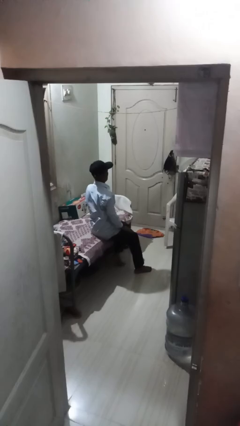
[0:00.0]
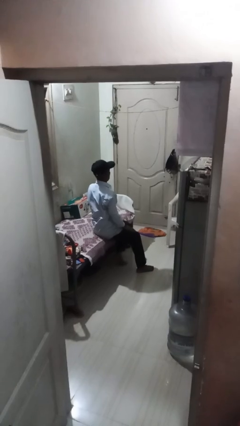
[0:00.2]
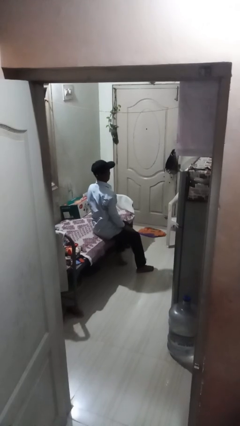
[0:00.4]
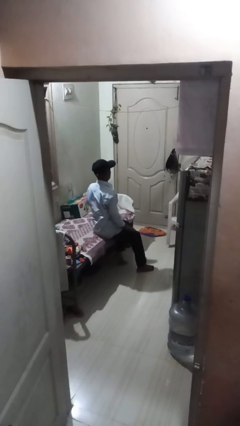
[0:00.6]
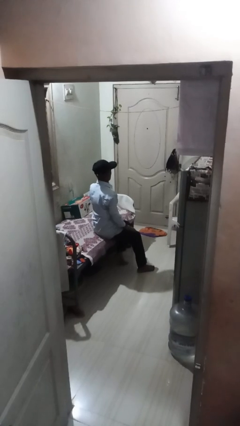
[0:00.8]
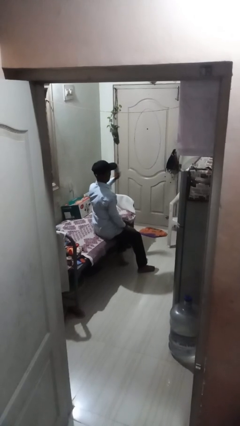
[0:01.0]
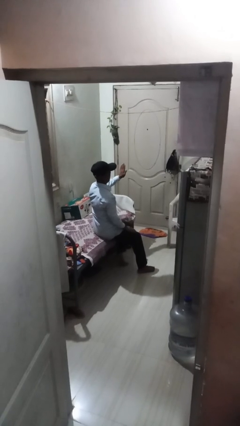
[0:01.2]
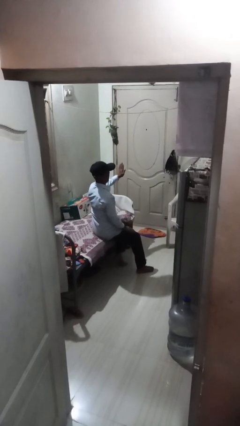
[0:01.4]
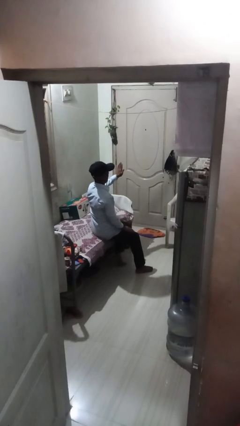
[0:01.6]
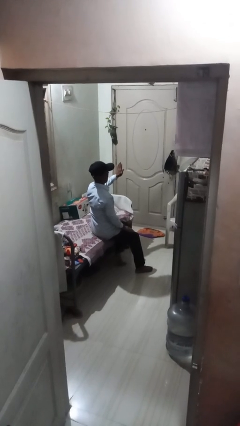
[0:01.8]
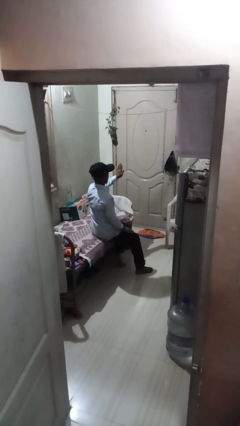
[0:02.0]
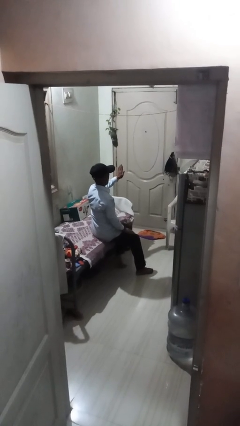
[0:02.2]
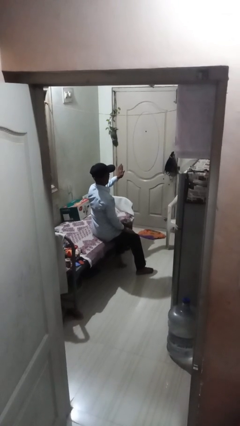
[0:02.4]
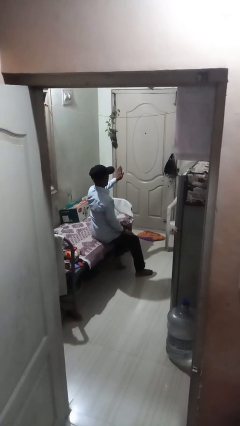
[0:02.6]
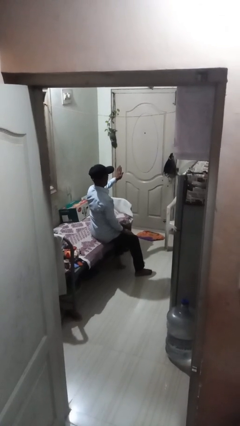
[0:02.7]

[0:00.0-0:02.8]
person gestures stop

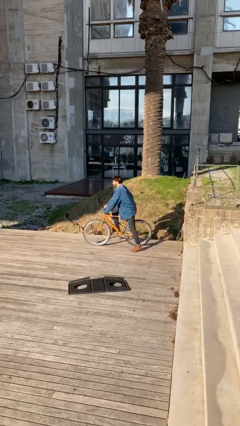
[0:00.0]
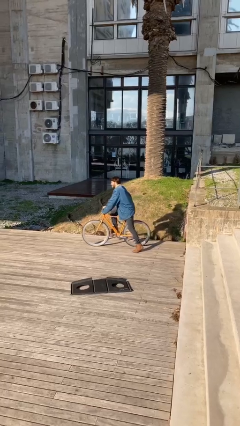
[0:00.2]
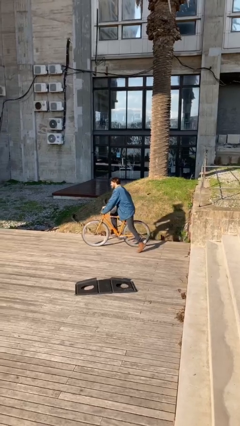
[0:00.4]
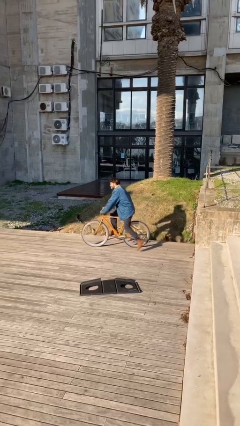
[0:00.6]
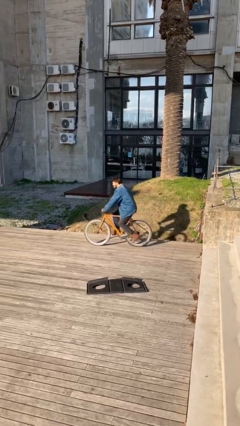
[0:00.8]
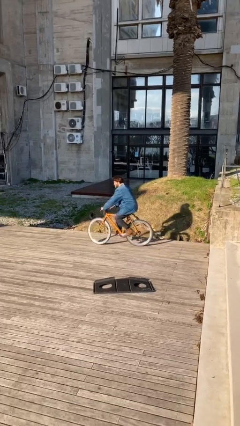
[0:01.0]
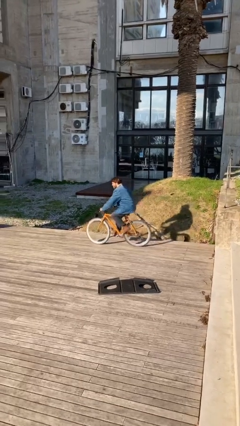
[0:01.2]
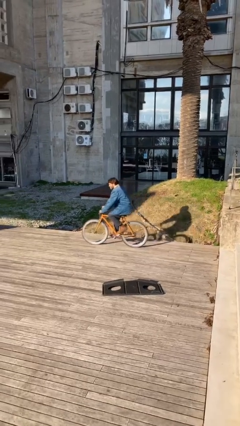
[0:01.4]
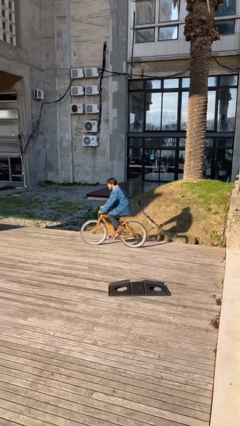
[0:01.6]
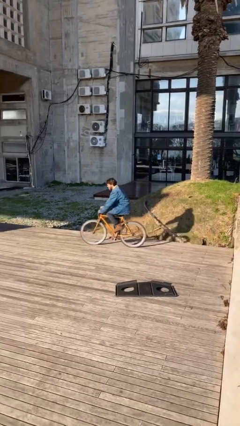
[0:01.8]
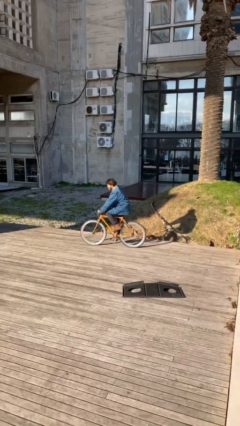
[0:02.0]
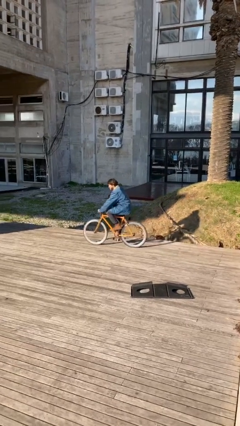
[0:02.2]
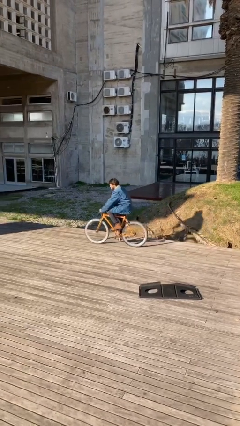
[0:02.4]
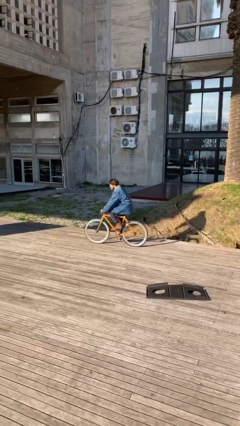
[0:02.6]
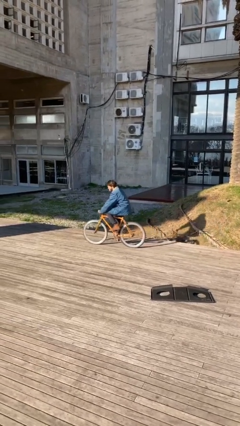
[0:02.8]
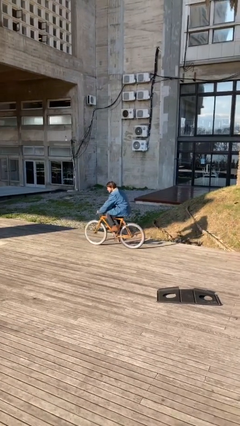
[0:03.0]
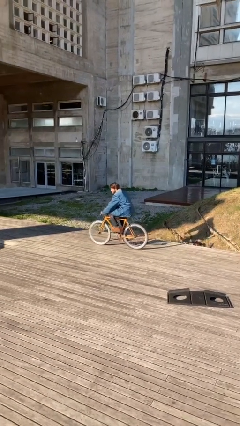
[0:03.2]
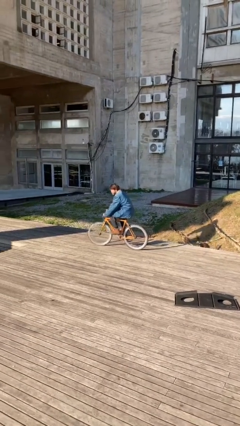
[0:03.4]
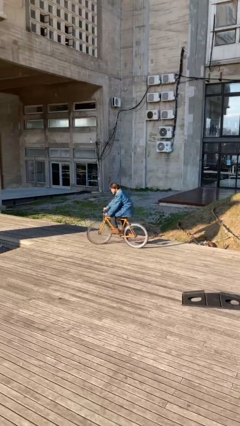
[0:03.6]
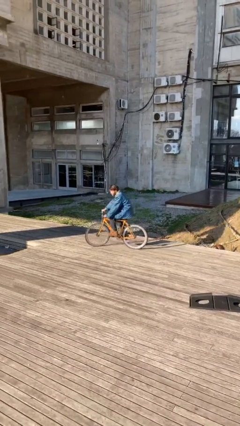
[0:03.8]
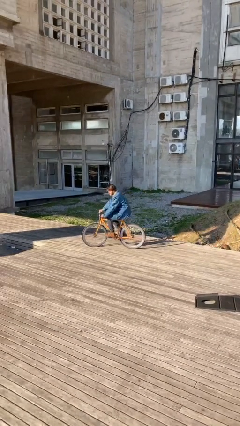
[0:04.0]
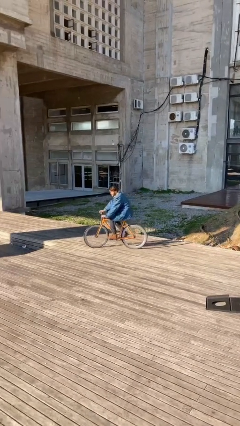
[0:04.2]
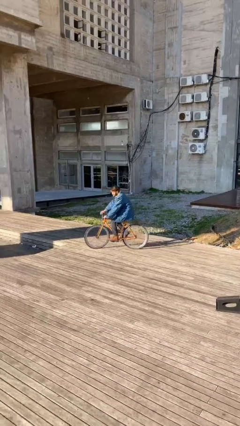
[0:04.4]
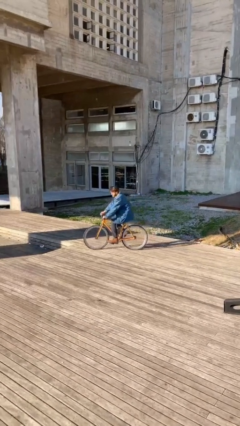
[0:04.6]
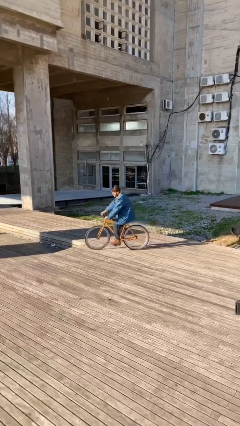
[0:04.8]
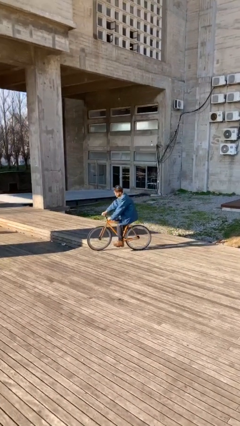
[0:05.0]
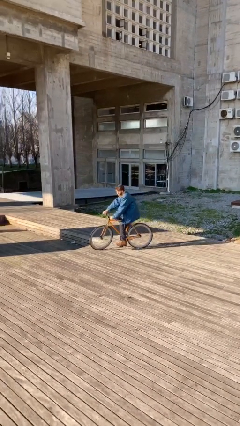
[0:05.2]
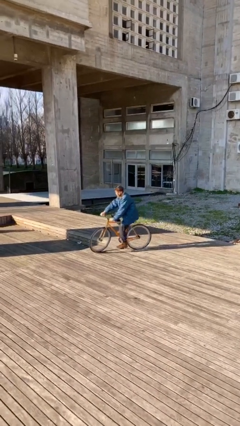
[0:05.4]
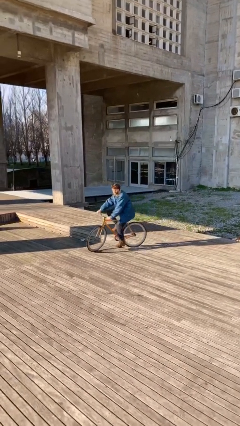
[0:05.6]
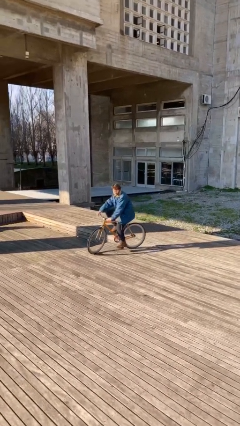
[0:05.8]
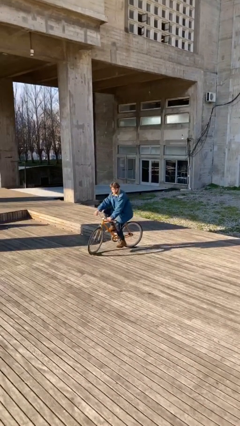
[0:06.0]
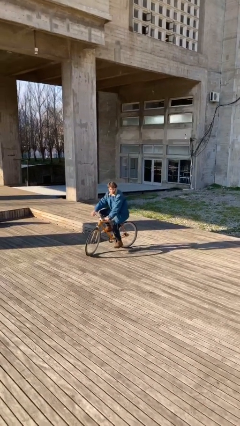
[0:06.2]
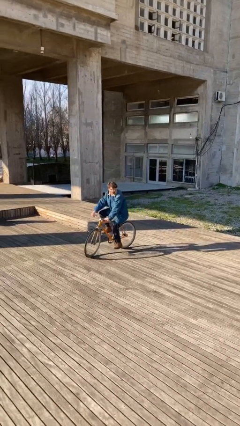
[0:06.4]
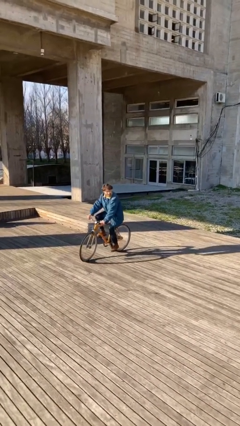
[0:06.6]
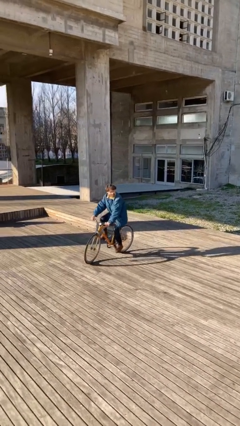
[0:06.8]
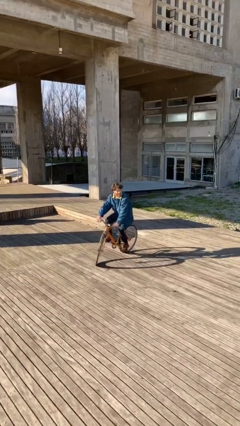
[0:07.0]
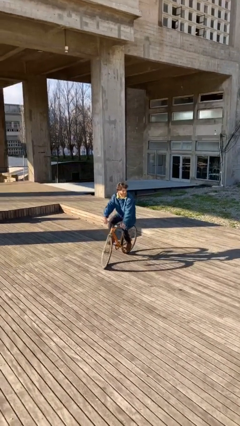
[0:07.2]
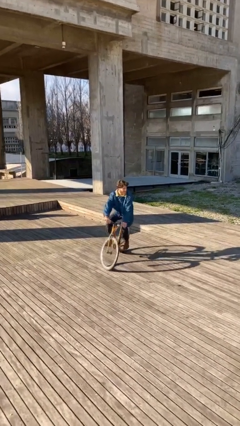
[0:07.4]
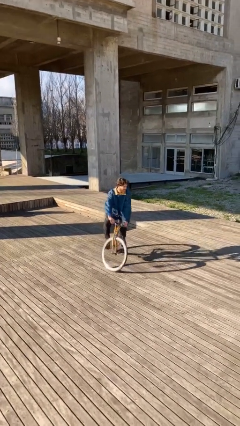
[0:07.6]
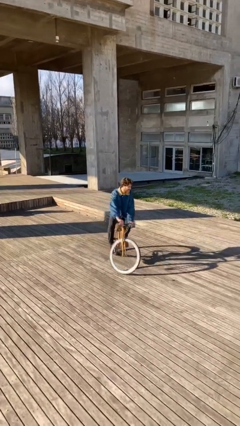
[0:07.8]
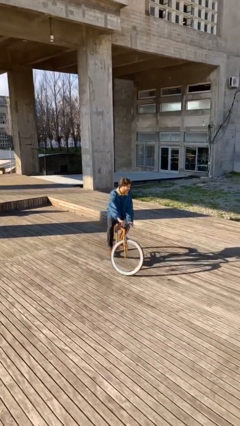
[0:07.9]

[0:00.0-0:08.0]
person rides bicycle

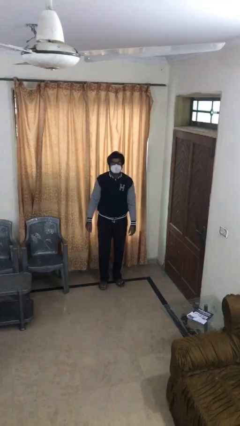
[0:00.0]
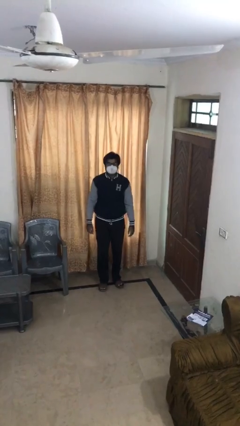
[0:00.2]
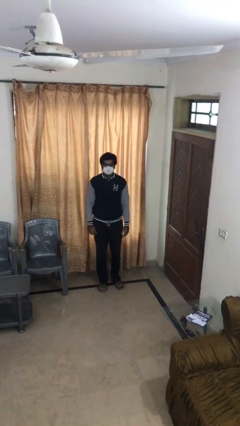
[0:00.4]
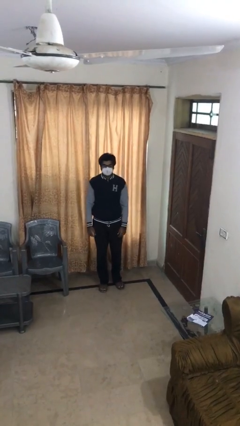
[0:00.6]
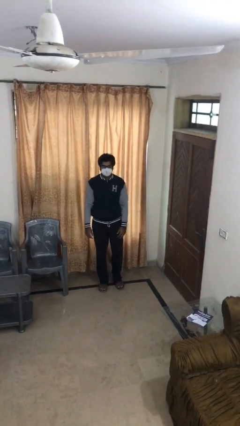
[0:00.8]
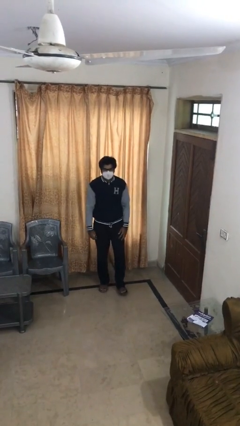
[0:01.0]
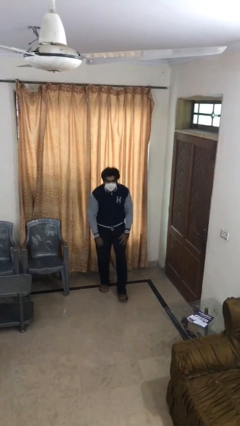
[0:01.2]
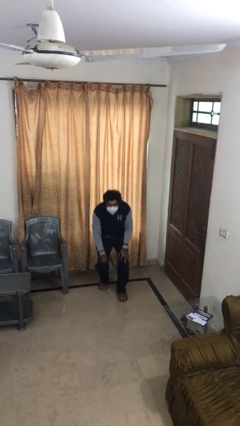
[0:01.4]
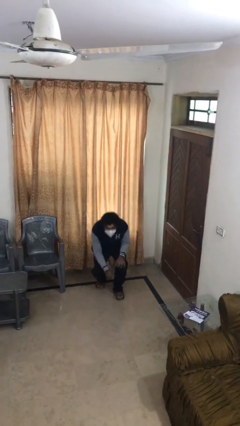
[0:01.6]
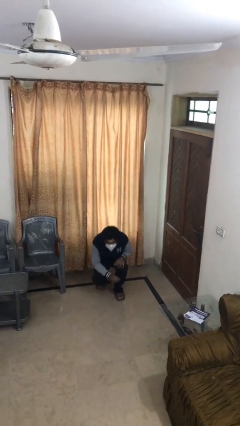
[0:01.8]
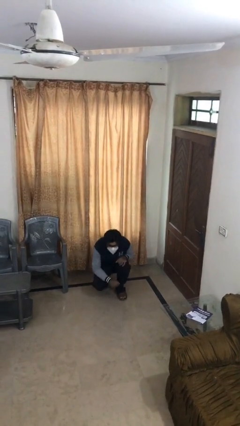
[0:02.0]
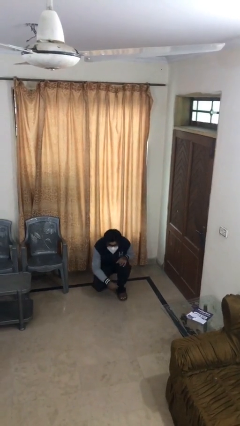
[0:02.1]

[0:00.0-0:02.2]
person sits down

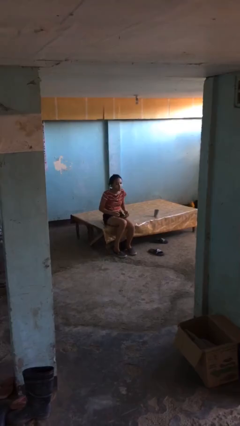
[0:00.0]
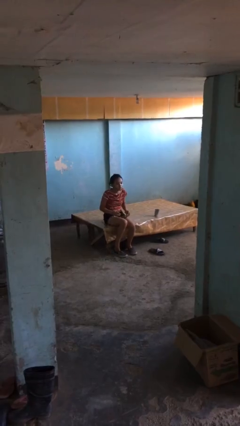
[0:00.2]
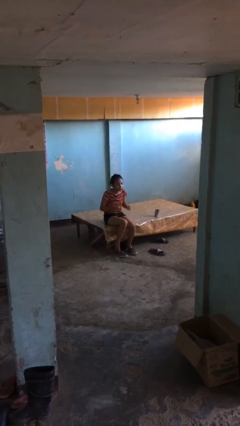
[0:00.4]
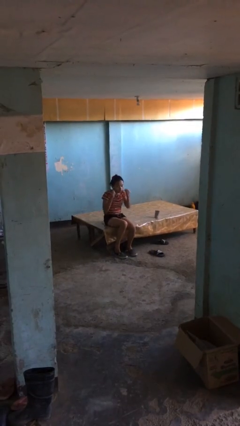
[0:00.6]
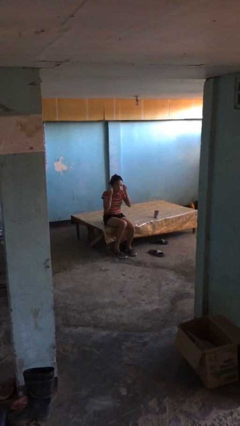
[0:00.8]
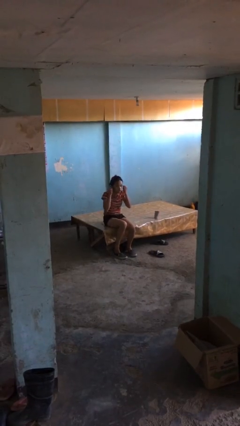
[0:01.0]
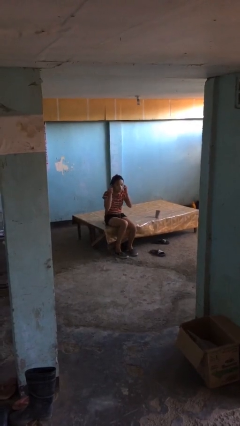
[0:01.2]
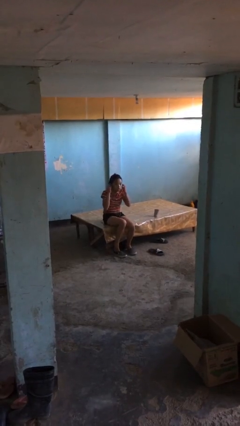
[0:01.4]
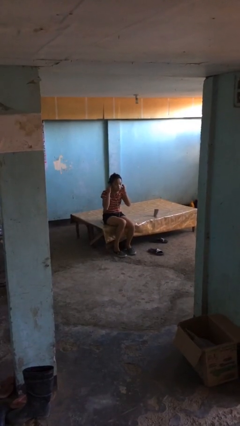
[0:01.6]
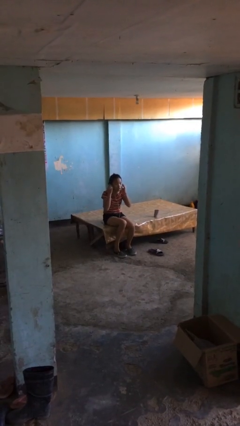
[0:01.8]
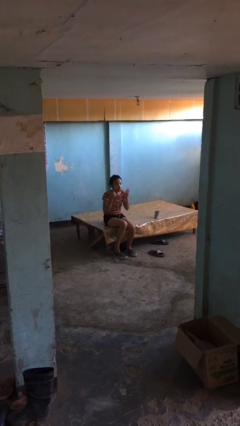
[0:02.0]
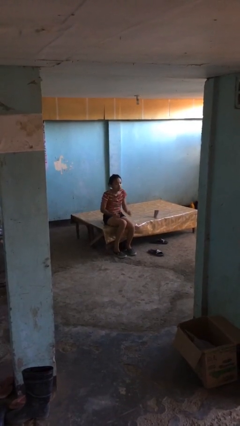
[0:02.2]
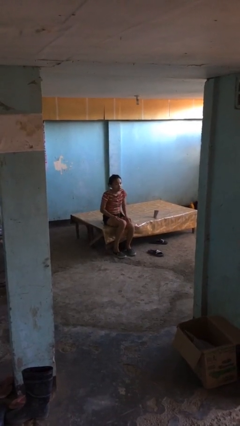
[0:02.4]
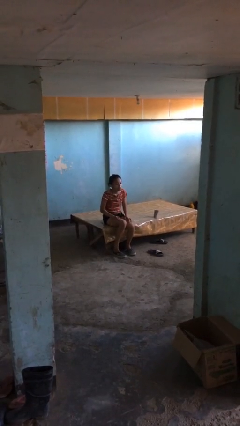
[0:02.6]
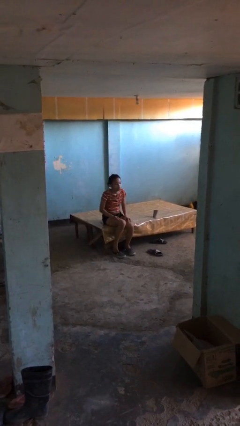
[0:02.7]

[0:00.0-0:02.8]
person puts on headphones

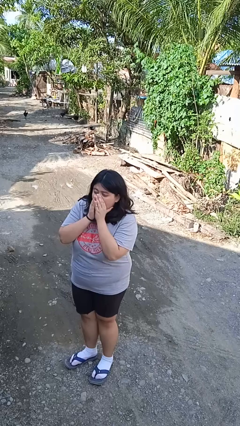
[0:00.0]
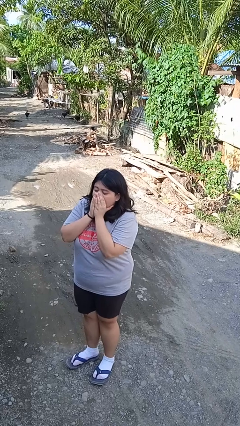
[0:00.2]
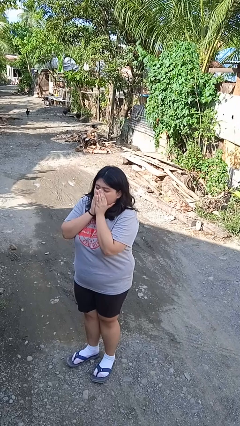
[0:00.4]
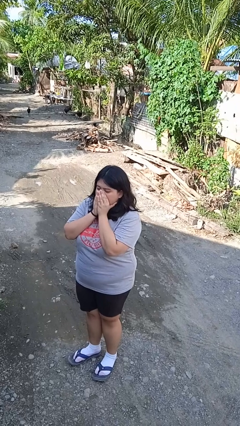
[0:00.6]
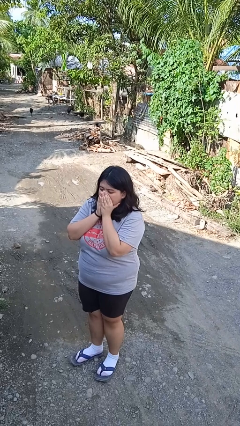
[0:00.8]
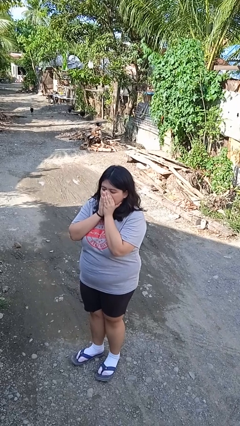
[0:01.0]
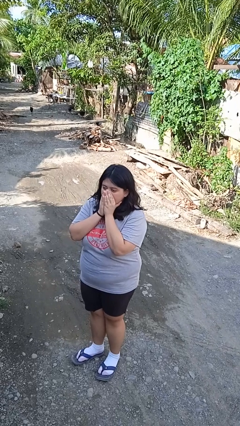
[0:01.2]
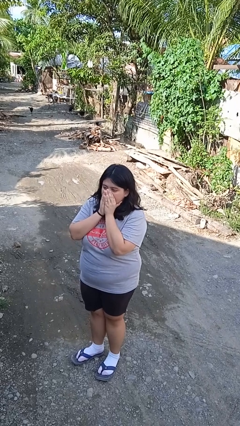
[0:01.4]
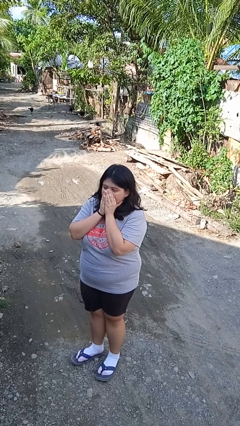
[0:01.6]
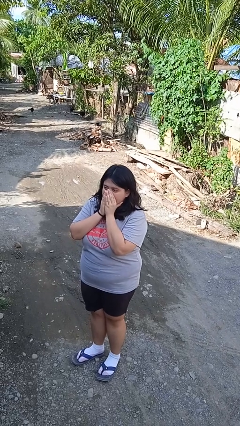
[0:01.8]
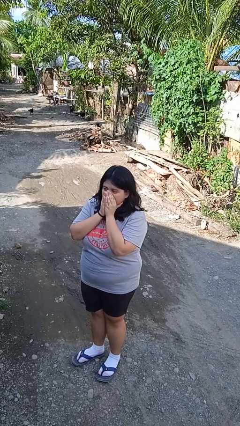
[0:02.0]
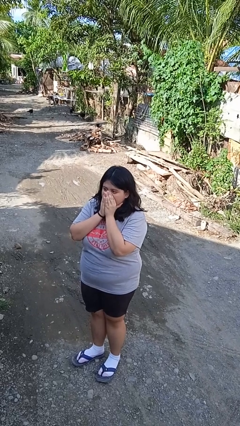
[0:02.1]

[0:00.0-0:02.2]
person blows into hands
